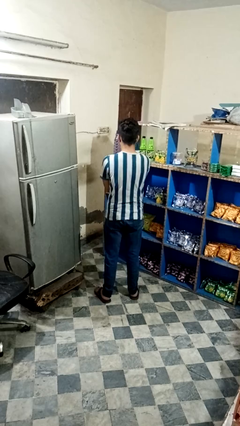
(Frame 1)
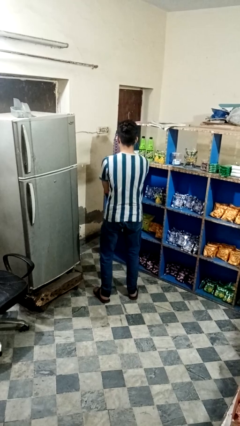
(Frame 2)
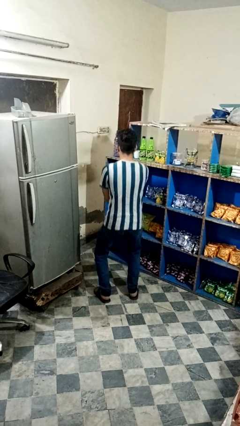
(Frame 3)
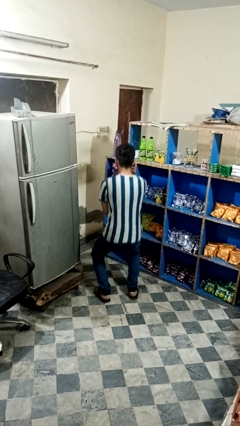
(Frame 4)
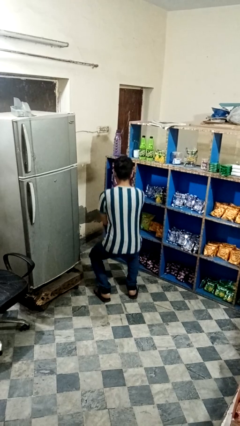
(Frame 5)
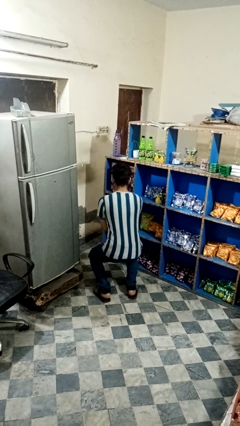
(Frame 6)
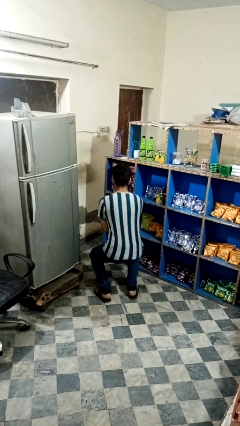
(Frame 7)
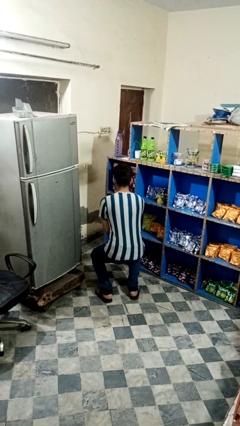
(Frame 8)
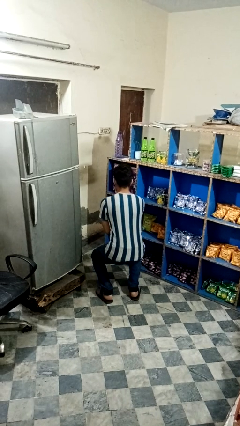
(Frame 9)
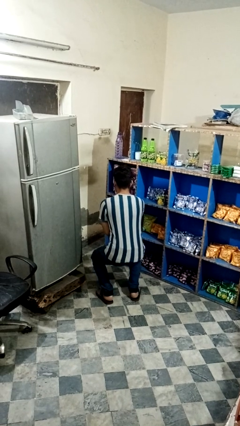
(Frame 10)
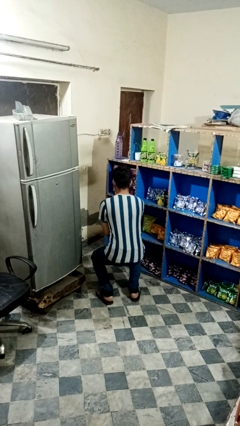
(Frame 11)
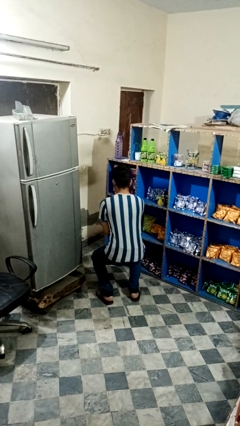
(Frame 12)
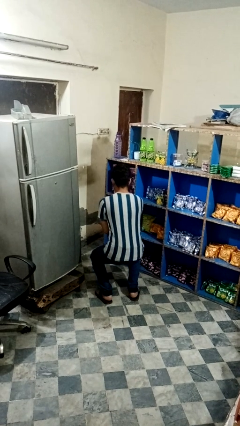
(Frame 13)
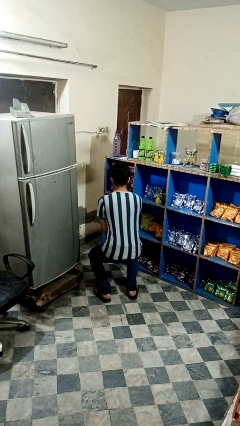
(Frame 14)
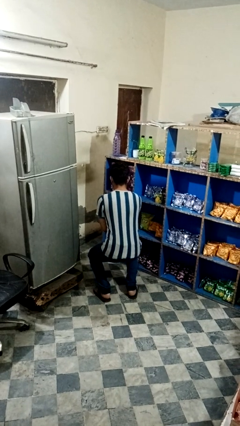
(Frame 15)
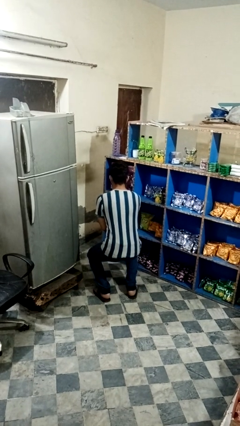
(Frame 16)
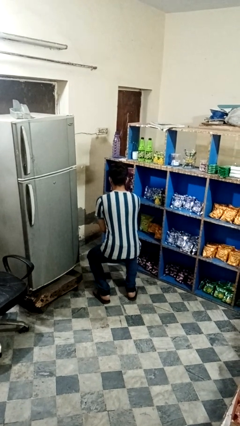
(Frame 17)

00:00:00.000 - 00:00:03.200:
person squats

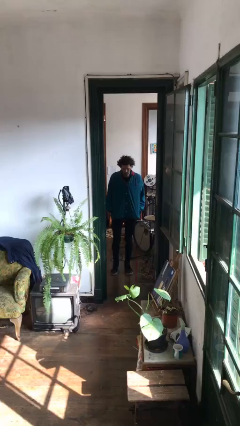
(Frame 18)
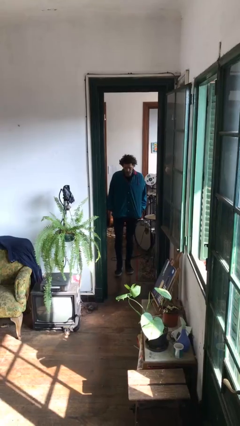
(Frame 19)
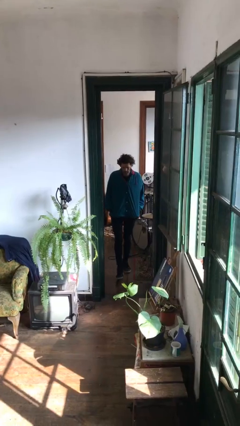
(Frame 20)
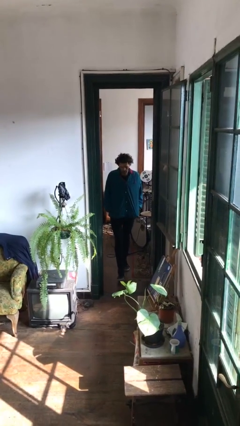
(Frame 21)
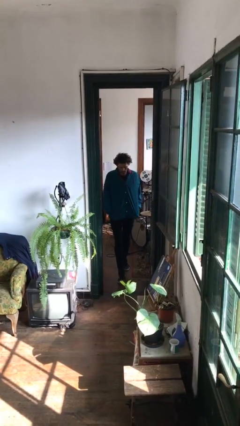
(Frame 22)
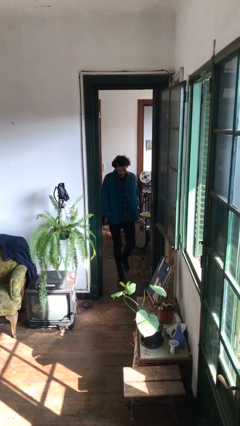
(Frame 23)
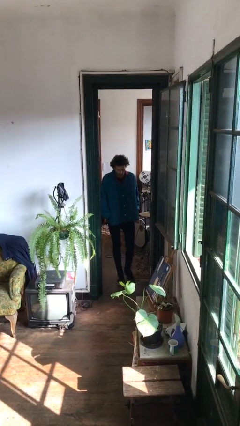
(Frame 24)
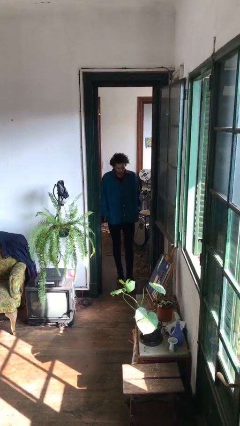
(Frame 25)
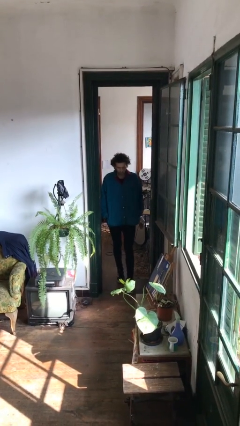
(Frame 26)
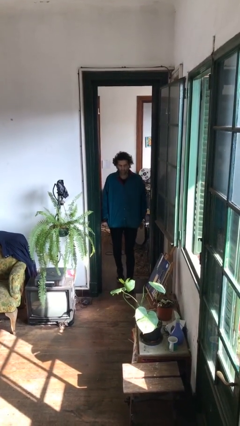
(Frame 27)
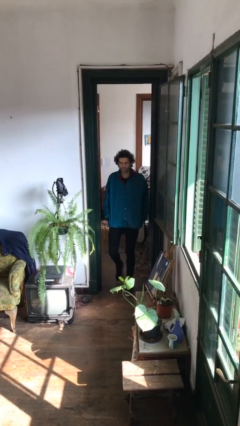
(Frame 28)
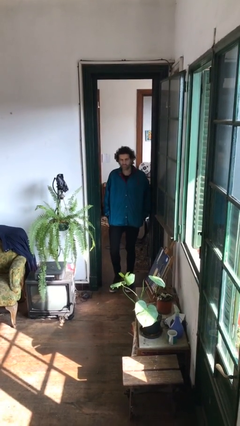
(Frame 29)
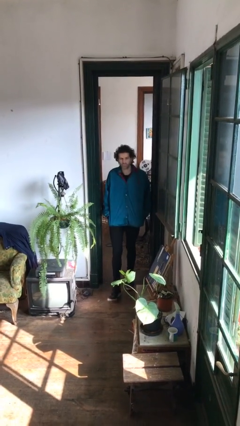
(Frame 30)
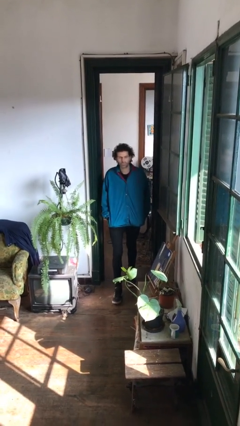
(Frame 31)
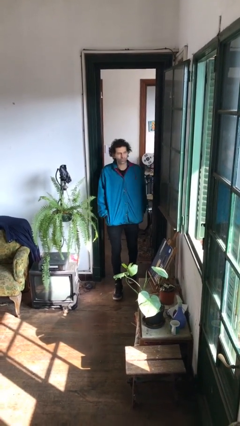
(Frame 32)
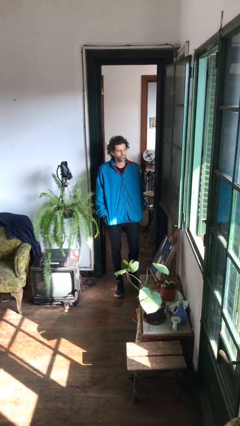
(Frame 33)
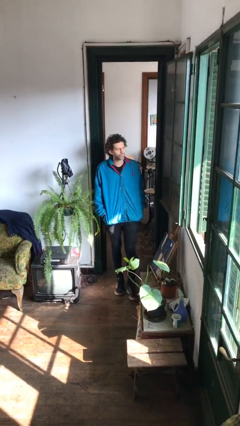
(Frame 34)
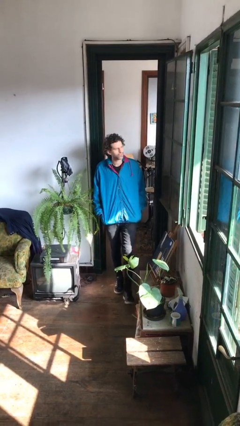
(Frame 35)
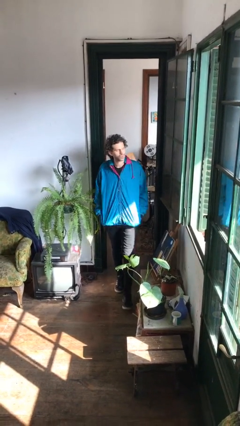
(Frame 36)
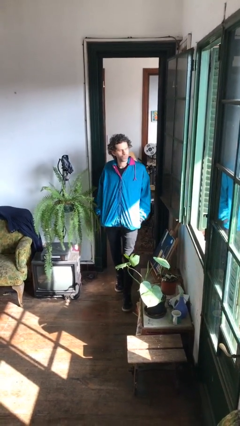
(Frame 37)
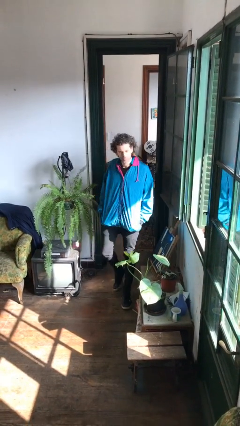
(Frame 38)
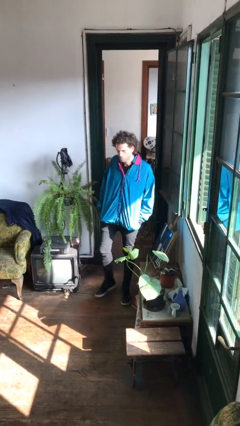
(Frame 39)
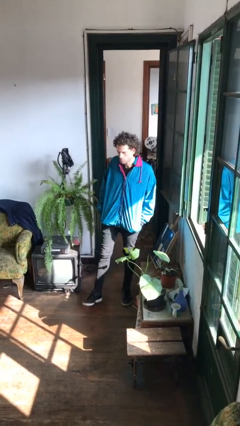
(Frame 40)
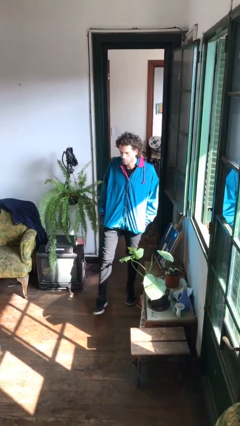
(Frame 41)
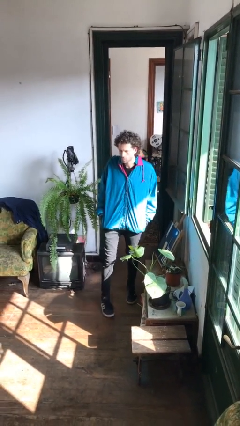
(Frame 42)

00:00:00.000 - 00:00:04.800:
person enters scene through structure

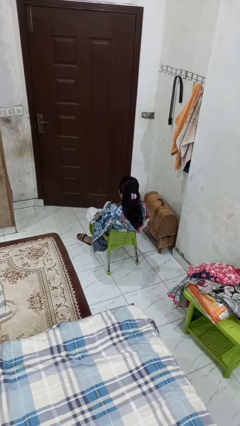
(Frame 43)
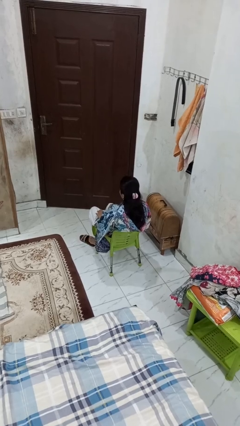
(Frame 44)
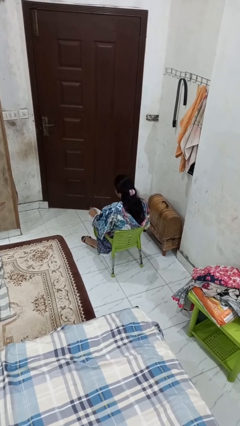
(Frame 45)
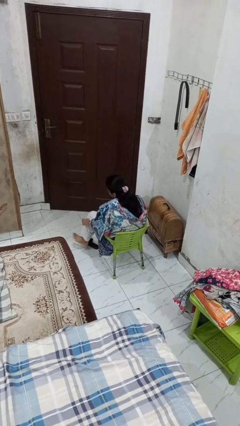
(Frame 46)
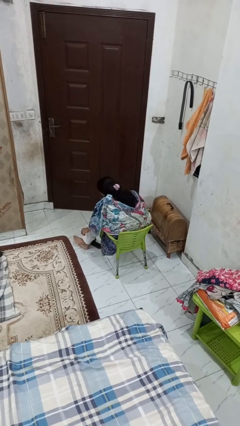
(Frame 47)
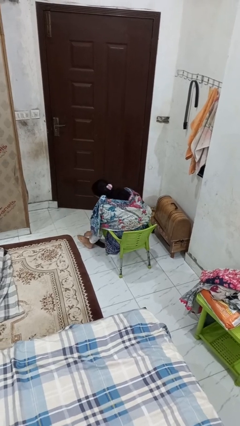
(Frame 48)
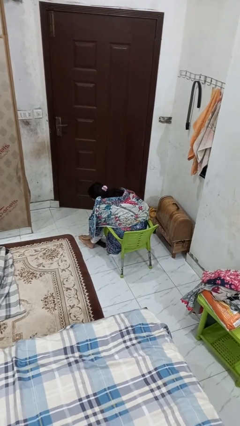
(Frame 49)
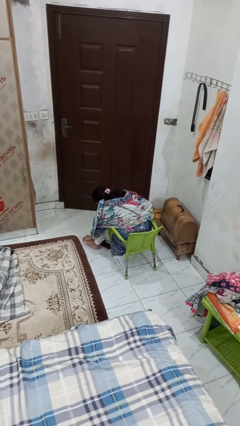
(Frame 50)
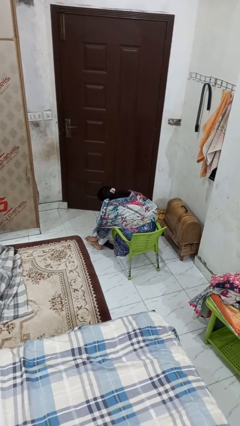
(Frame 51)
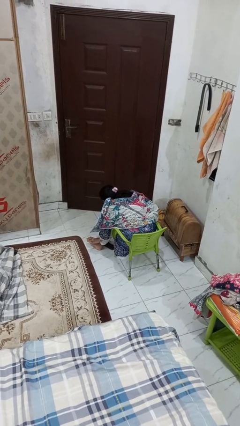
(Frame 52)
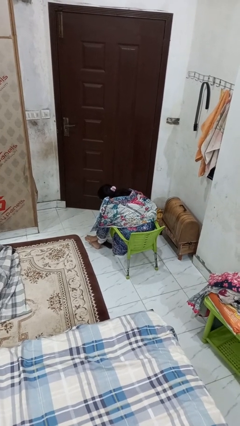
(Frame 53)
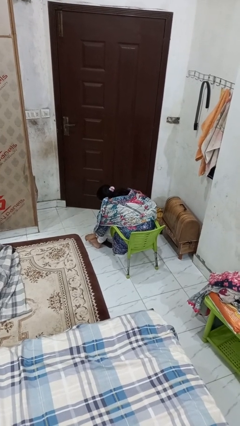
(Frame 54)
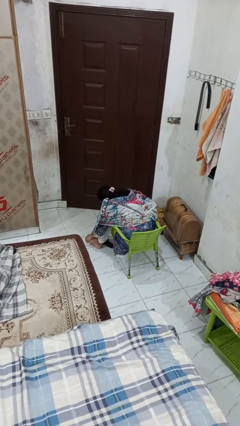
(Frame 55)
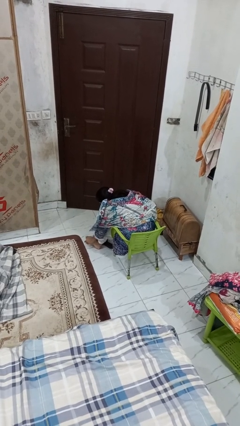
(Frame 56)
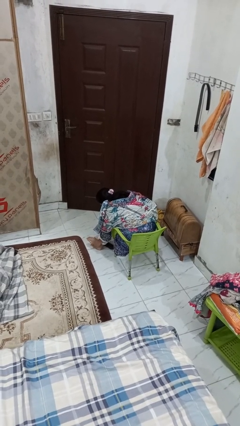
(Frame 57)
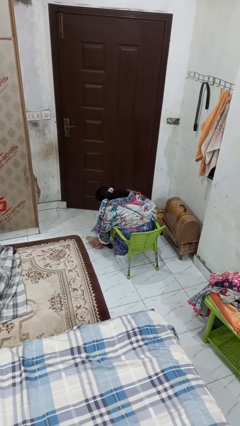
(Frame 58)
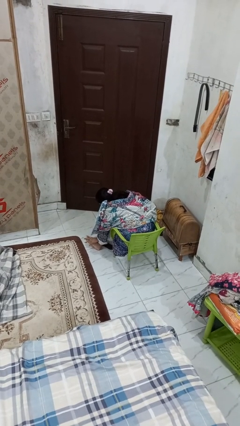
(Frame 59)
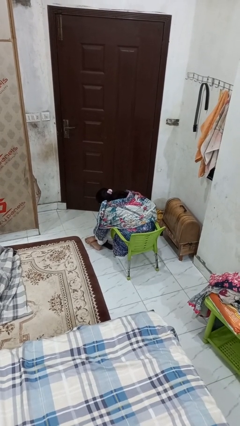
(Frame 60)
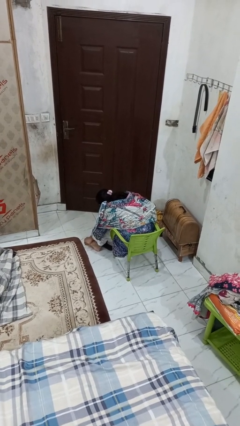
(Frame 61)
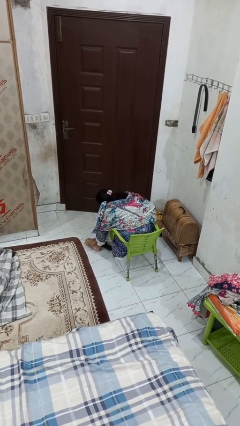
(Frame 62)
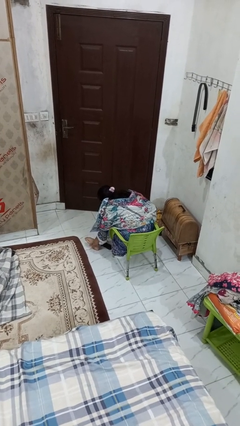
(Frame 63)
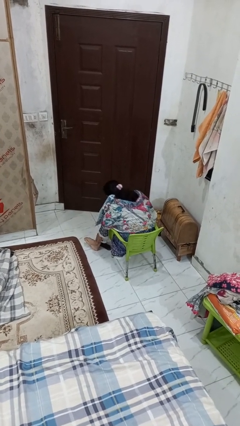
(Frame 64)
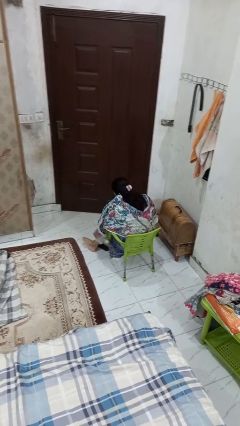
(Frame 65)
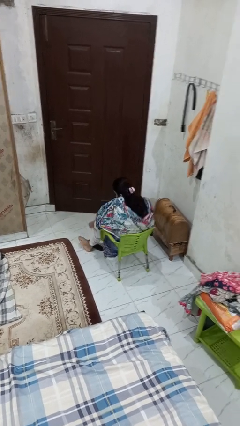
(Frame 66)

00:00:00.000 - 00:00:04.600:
person rubs foot

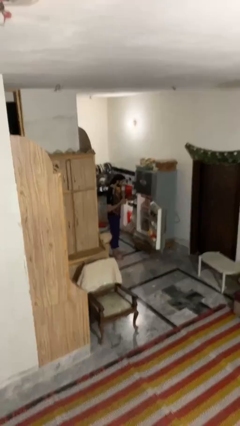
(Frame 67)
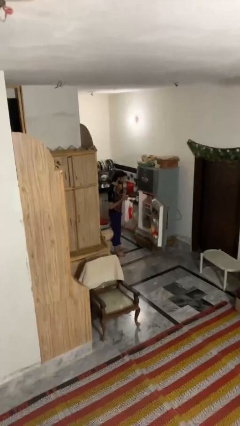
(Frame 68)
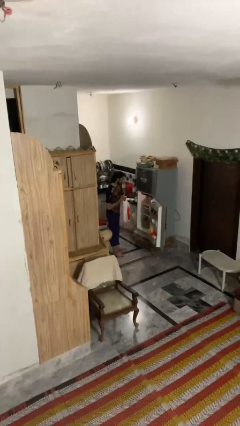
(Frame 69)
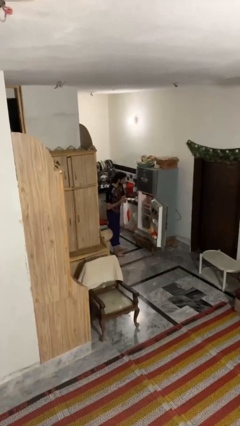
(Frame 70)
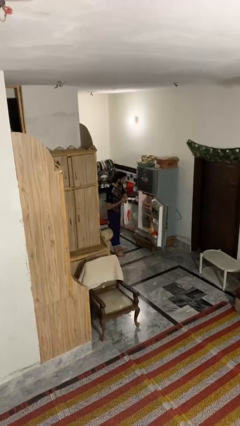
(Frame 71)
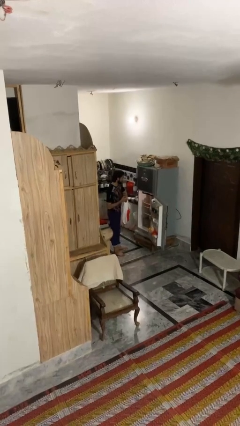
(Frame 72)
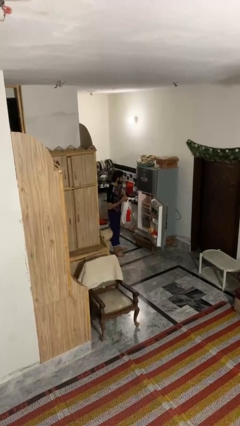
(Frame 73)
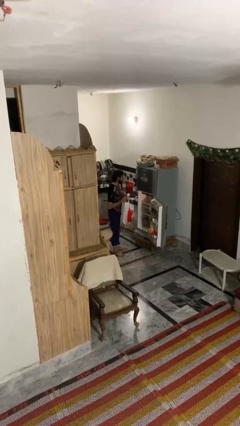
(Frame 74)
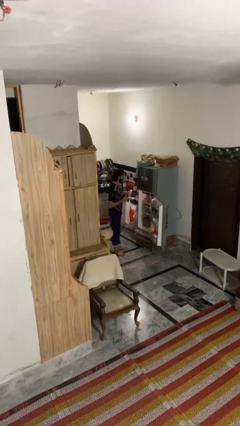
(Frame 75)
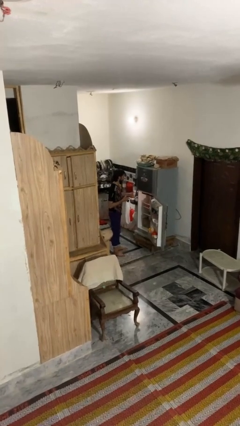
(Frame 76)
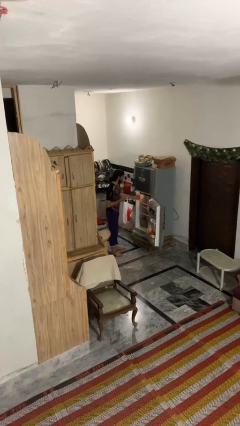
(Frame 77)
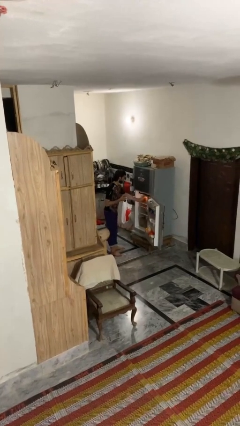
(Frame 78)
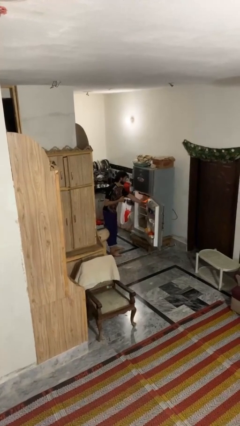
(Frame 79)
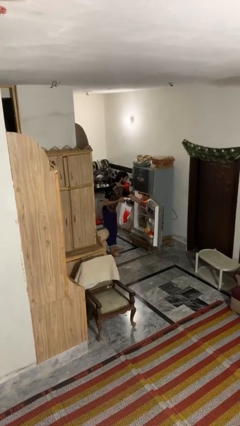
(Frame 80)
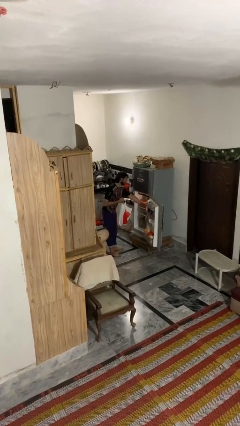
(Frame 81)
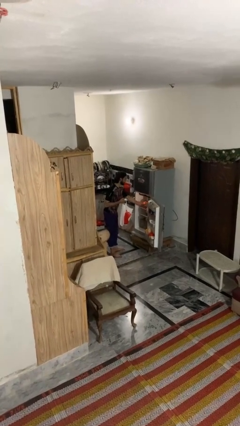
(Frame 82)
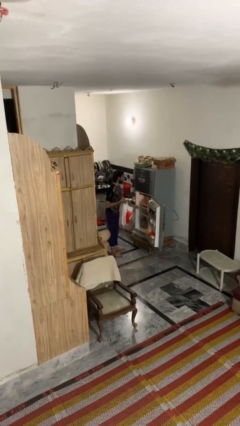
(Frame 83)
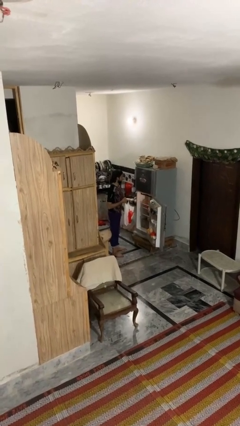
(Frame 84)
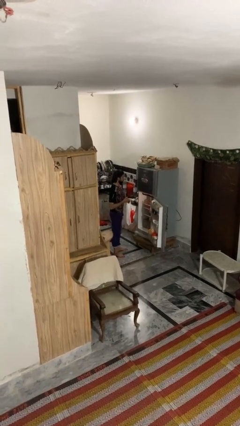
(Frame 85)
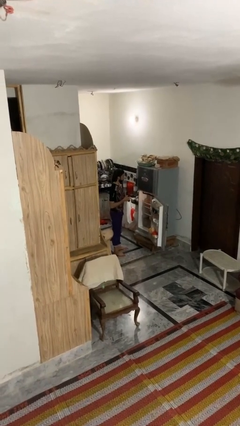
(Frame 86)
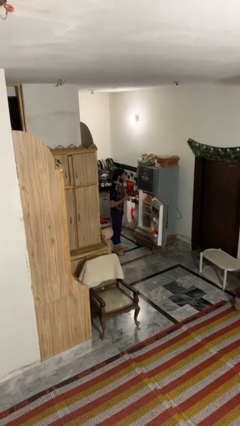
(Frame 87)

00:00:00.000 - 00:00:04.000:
person loads groceries into refrigerator

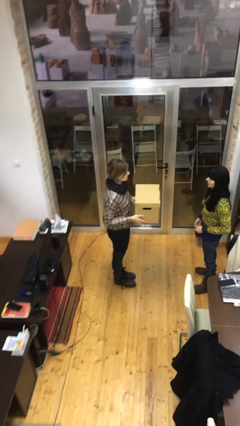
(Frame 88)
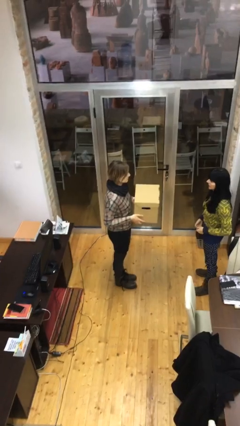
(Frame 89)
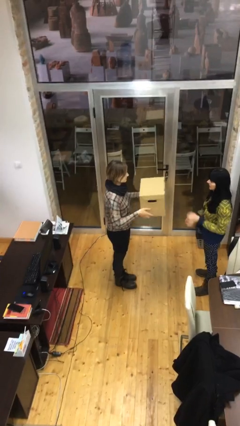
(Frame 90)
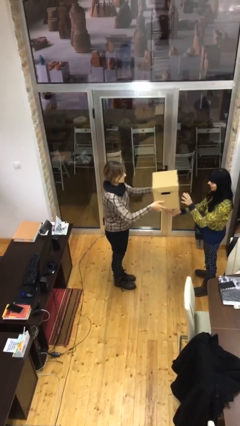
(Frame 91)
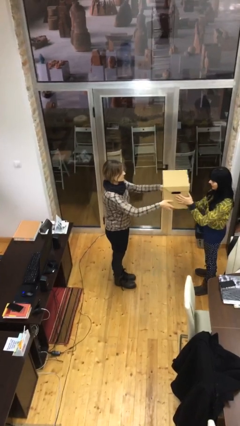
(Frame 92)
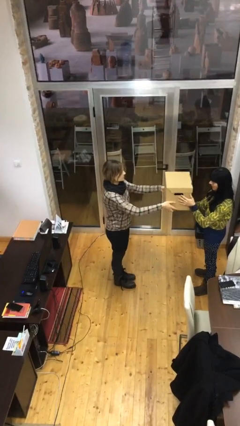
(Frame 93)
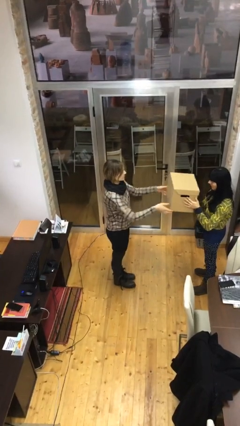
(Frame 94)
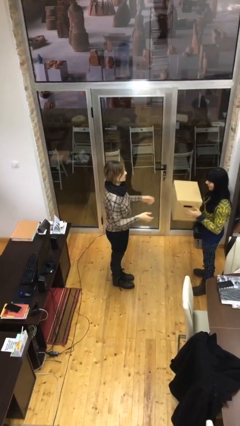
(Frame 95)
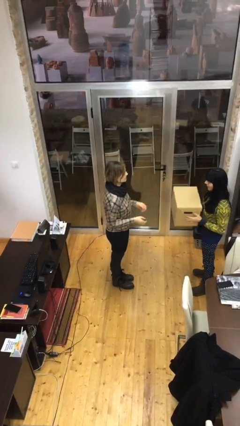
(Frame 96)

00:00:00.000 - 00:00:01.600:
person transfers object to person
